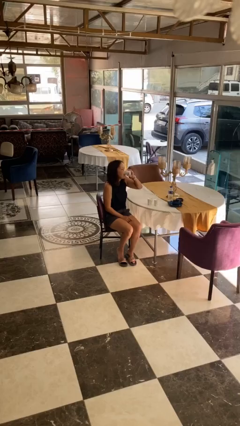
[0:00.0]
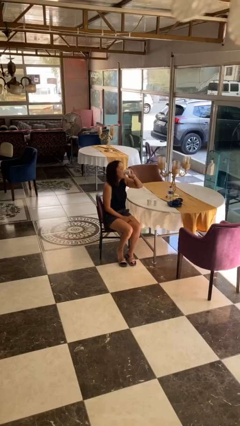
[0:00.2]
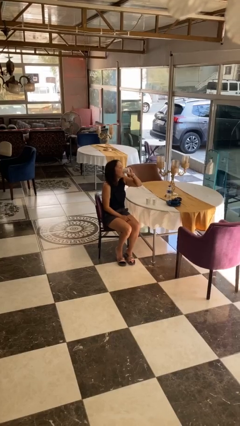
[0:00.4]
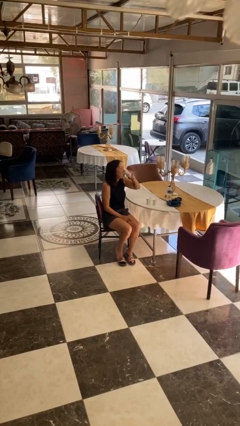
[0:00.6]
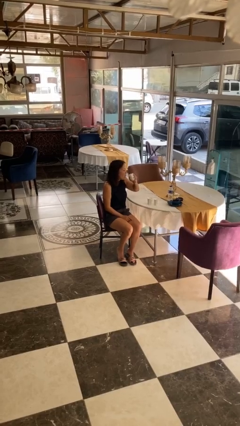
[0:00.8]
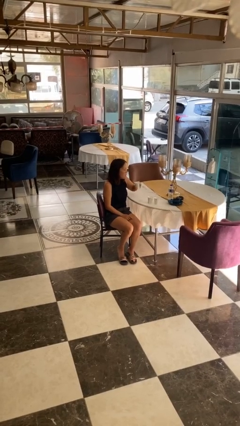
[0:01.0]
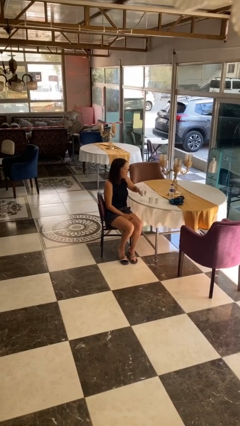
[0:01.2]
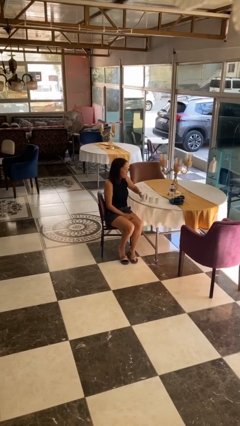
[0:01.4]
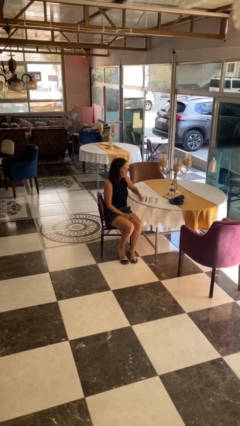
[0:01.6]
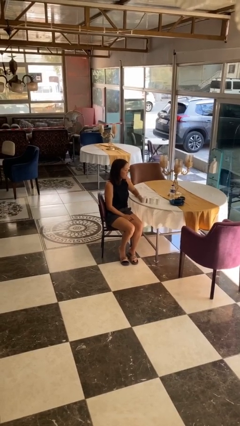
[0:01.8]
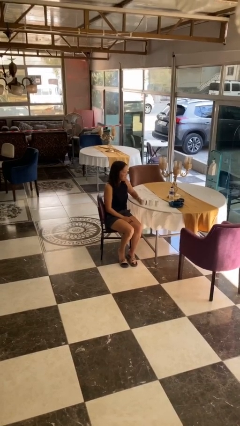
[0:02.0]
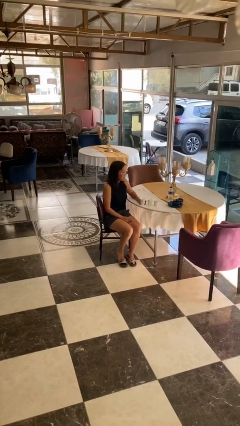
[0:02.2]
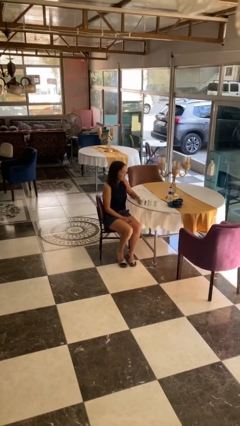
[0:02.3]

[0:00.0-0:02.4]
person puts down object on table

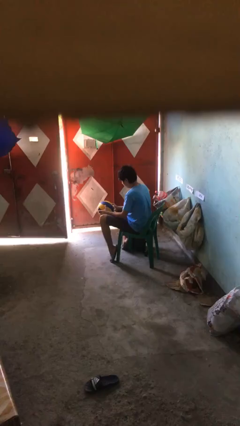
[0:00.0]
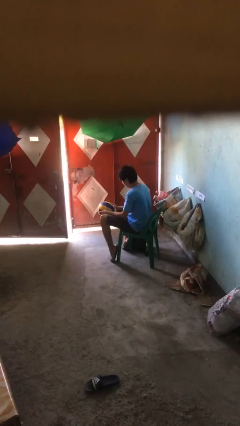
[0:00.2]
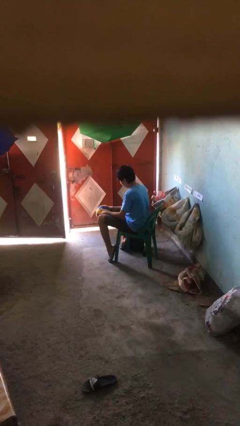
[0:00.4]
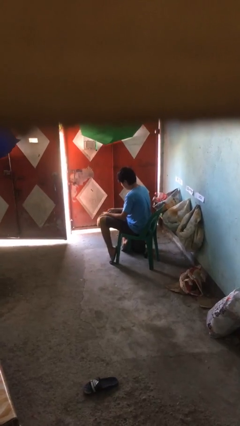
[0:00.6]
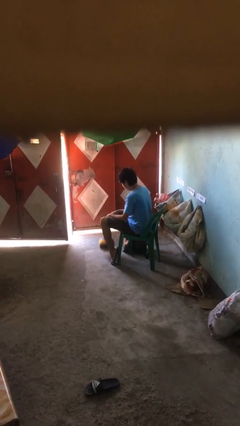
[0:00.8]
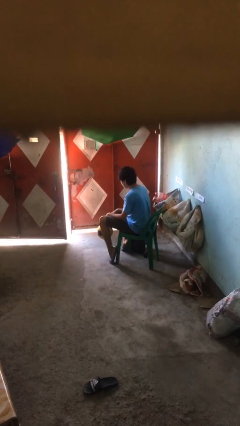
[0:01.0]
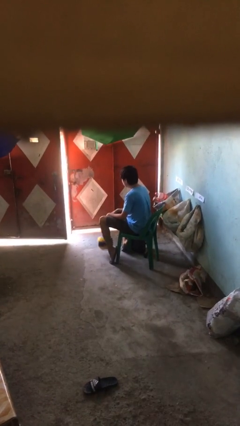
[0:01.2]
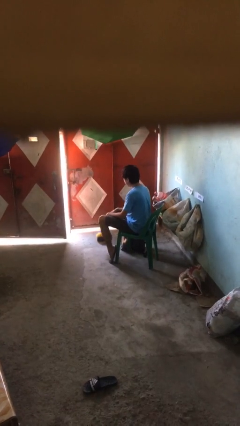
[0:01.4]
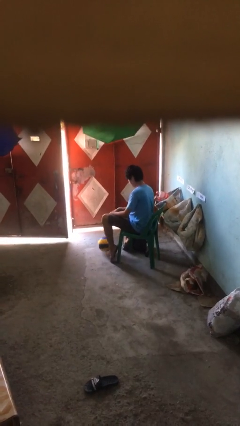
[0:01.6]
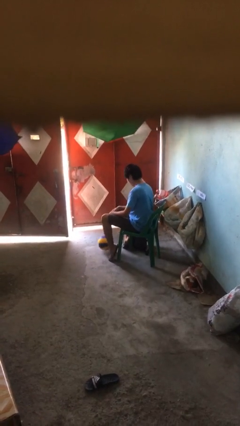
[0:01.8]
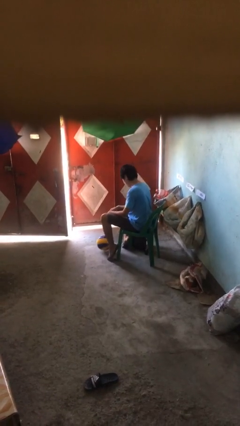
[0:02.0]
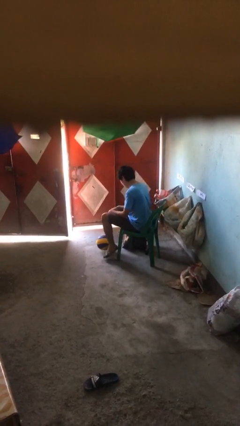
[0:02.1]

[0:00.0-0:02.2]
person drops object

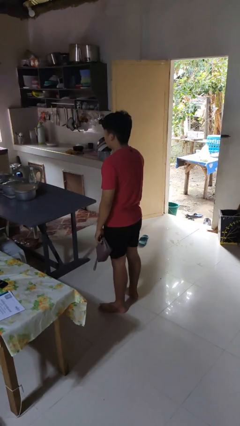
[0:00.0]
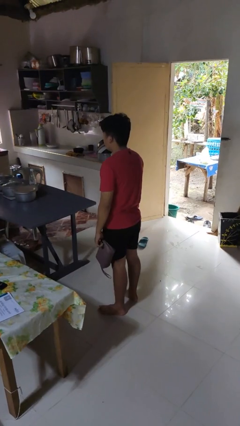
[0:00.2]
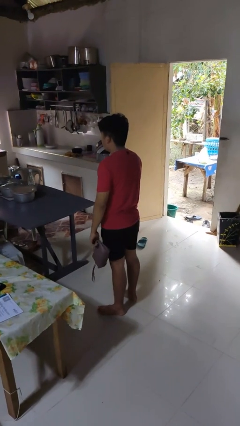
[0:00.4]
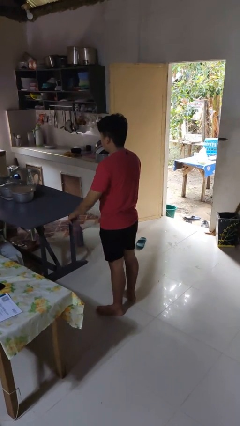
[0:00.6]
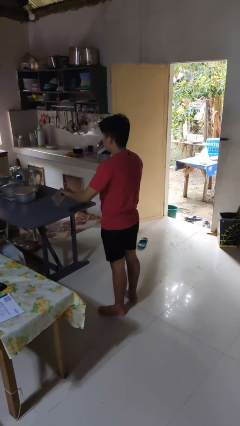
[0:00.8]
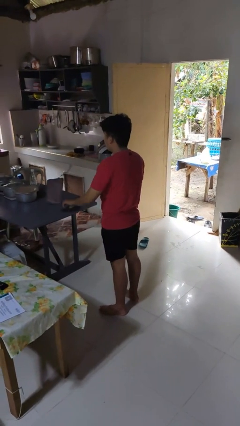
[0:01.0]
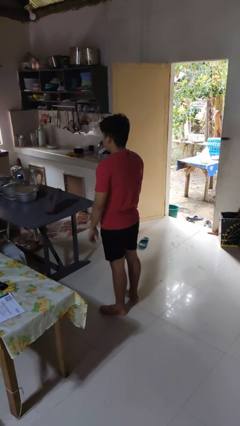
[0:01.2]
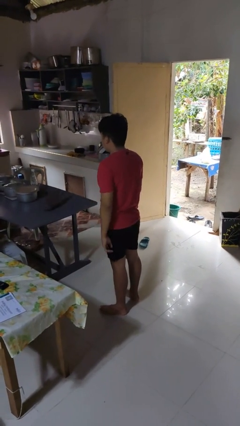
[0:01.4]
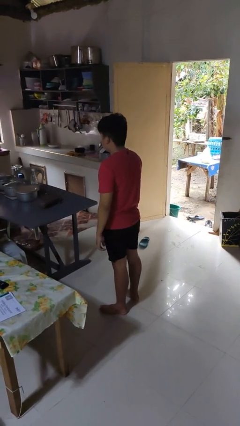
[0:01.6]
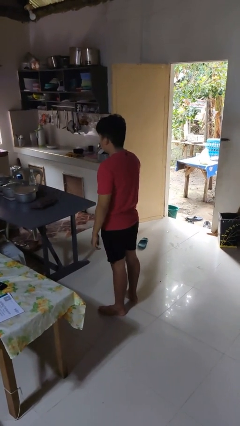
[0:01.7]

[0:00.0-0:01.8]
person throws object on table

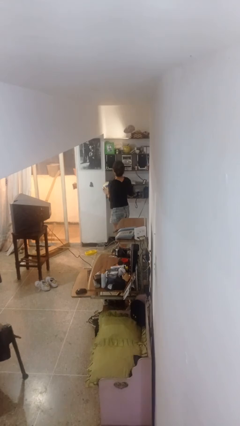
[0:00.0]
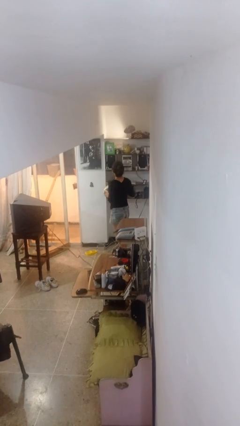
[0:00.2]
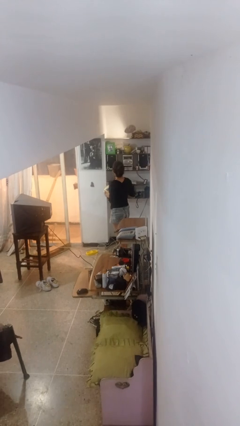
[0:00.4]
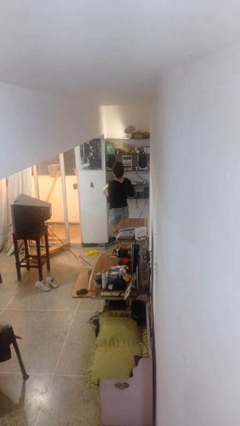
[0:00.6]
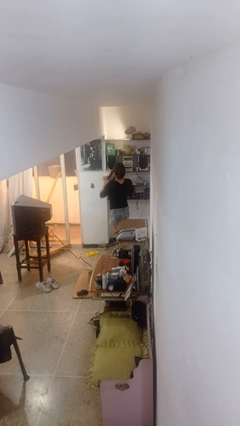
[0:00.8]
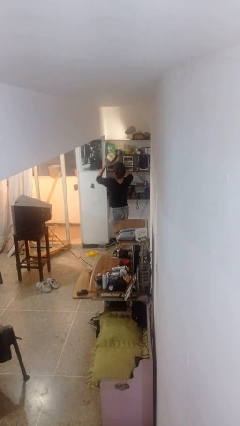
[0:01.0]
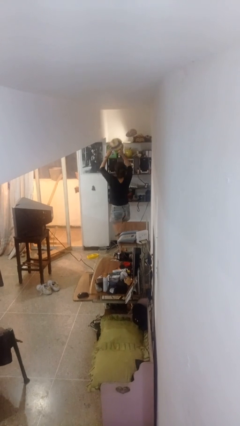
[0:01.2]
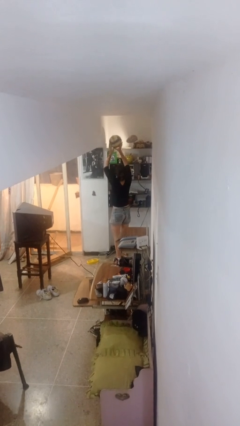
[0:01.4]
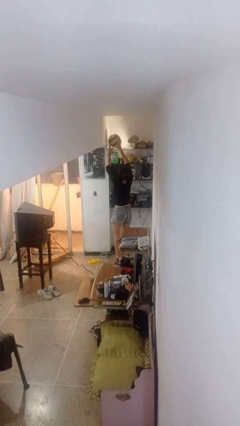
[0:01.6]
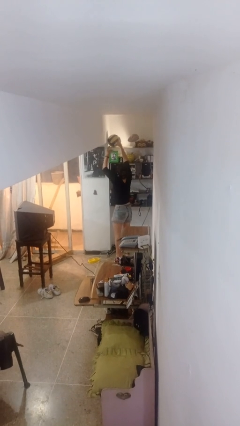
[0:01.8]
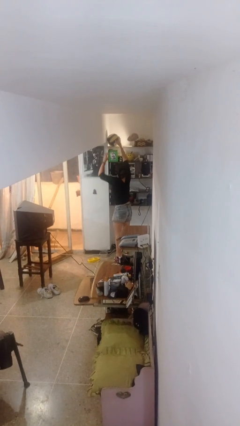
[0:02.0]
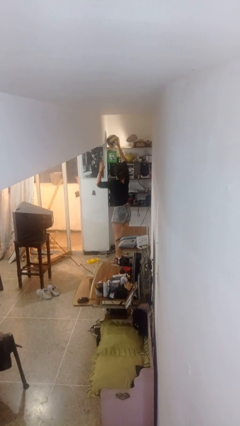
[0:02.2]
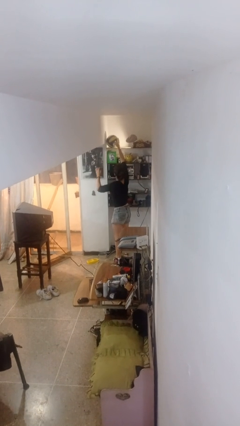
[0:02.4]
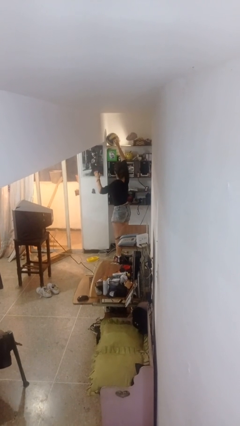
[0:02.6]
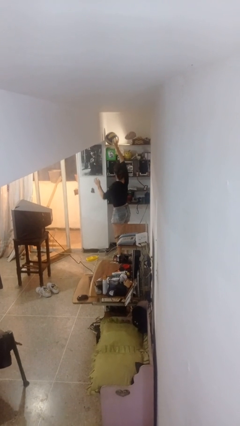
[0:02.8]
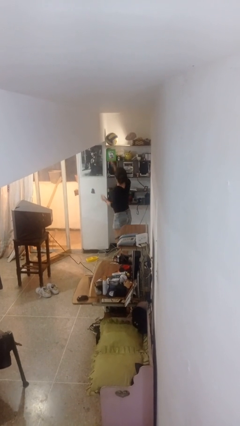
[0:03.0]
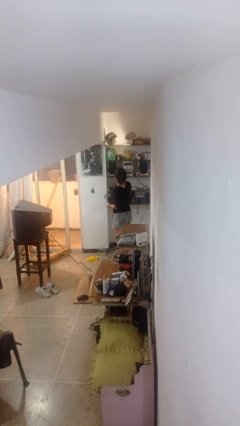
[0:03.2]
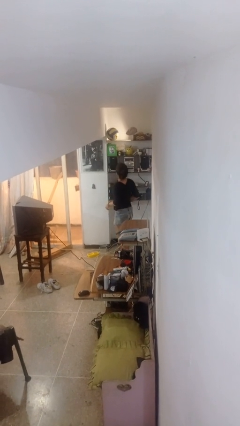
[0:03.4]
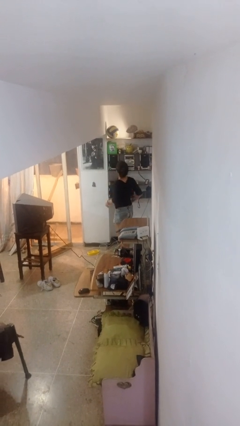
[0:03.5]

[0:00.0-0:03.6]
person puts down object on shelf

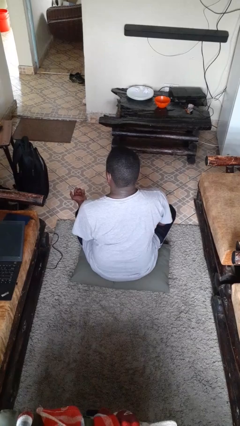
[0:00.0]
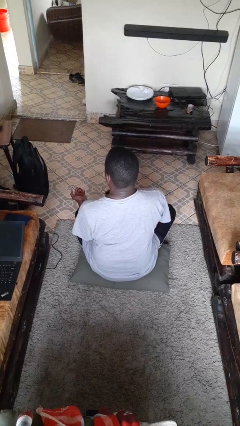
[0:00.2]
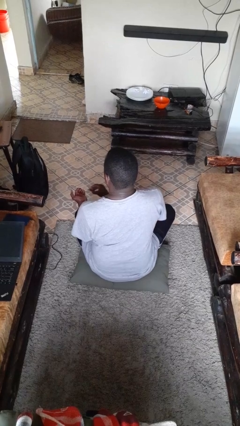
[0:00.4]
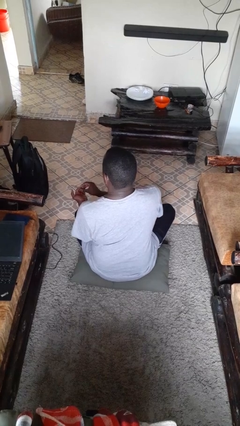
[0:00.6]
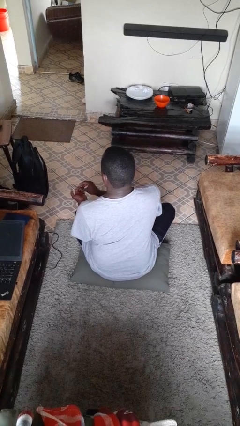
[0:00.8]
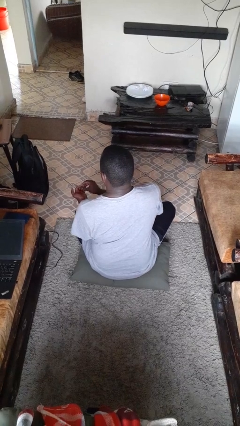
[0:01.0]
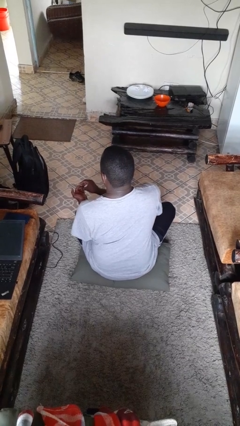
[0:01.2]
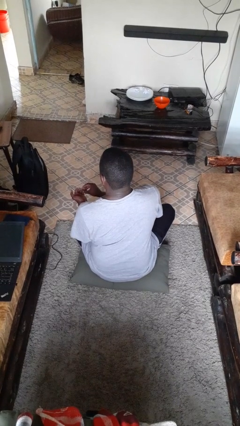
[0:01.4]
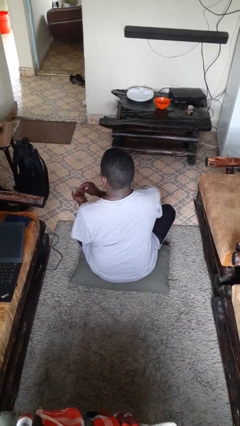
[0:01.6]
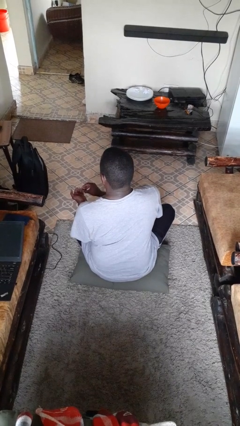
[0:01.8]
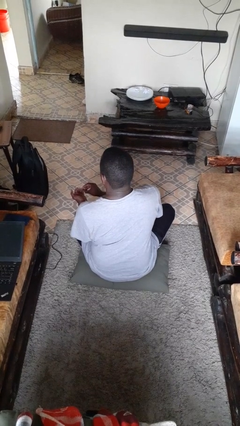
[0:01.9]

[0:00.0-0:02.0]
person files fingernails

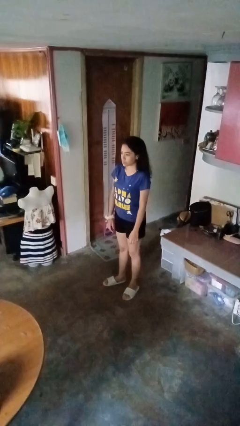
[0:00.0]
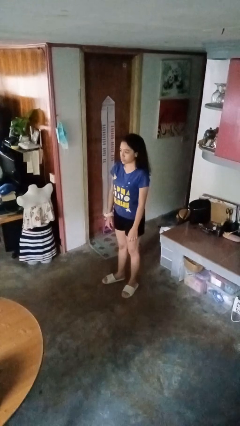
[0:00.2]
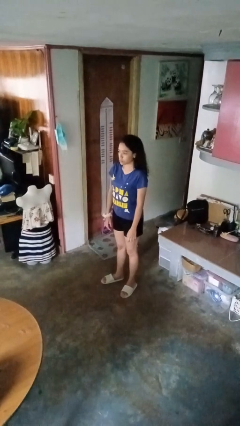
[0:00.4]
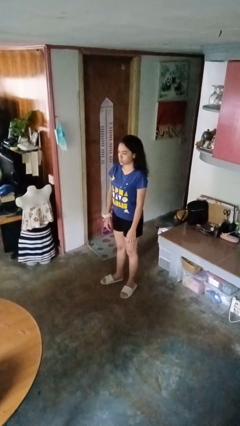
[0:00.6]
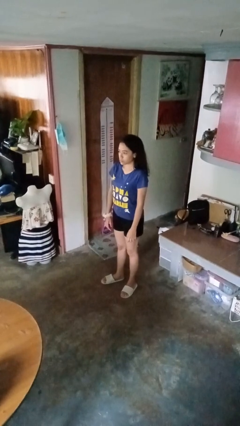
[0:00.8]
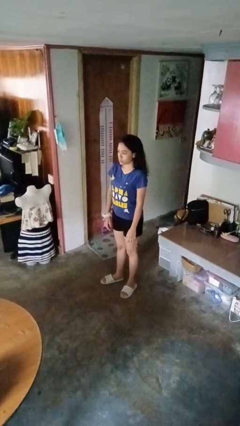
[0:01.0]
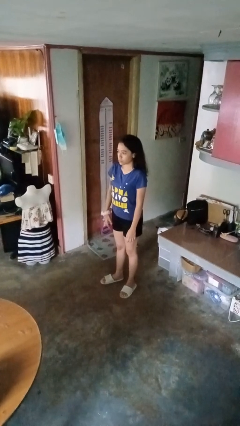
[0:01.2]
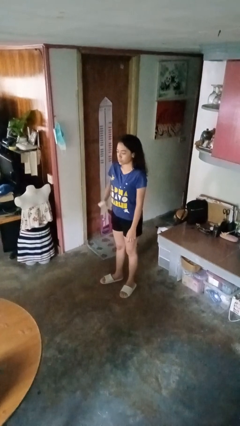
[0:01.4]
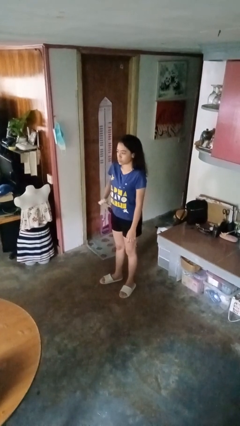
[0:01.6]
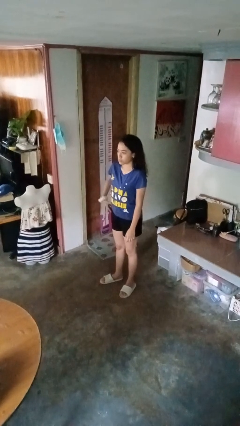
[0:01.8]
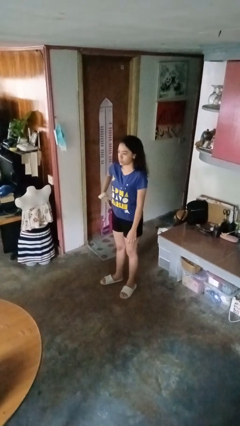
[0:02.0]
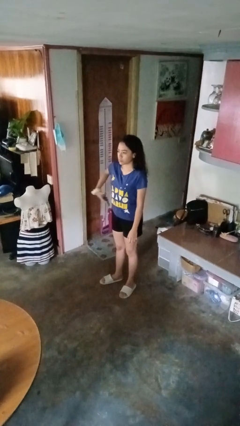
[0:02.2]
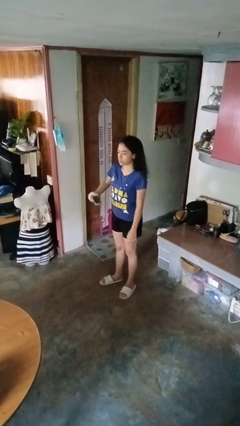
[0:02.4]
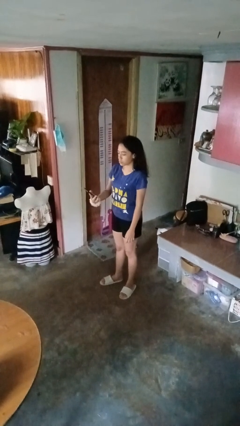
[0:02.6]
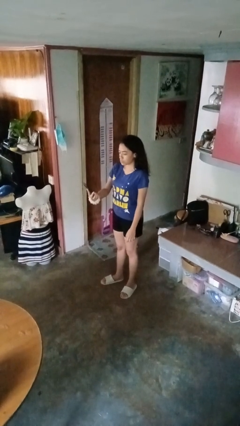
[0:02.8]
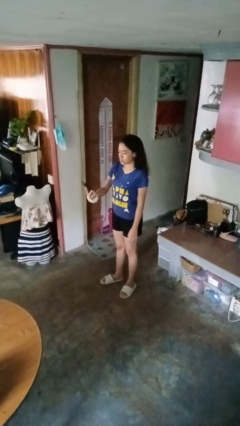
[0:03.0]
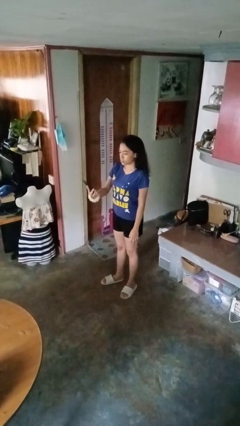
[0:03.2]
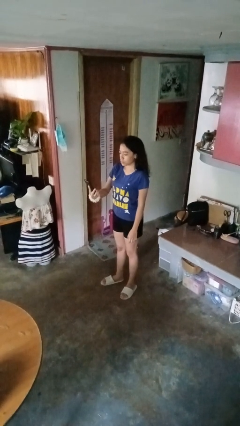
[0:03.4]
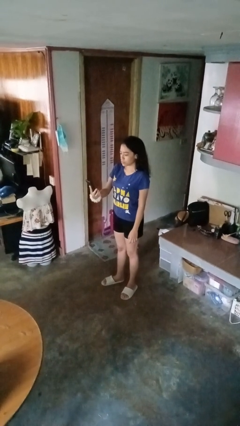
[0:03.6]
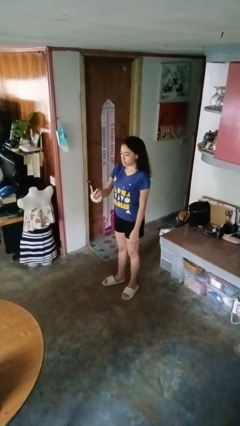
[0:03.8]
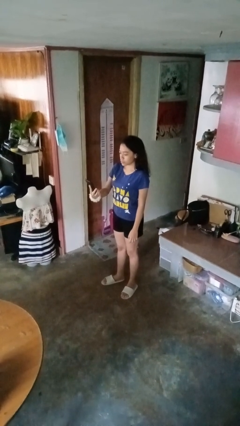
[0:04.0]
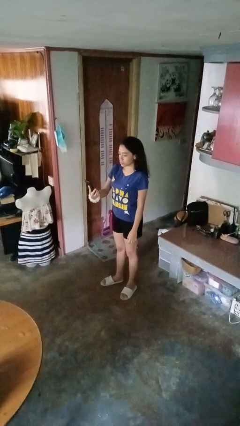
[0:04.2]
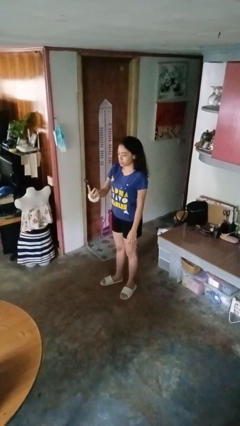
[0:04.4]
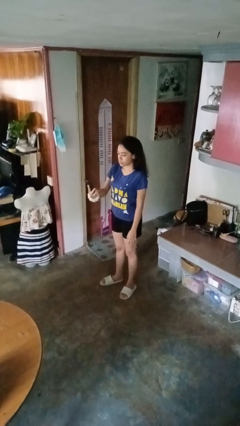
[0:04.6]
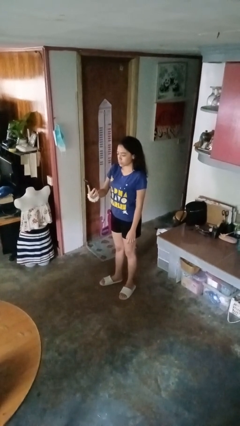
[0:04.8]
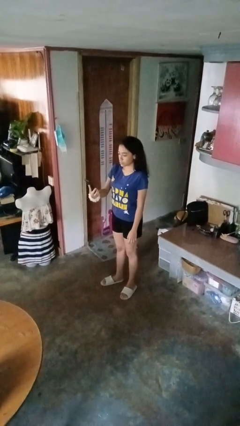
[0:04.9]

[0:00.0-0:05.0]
person takes phone from pocket

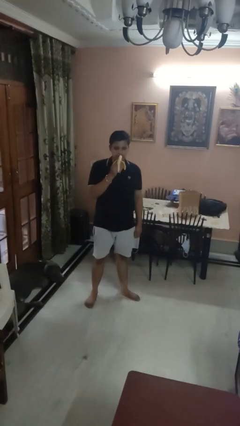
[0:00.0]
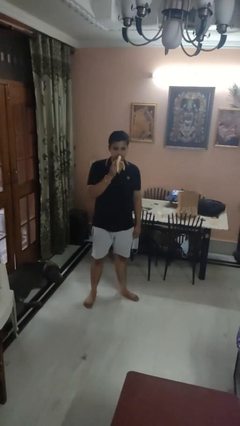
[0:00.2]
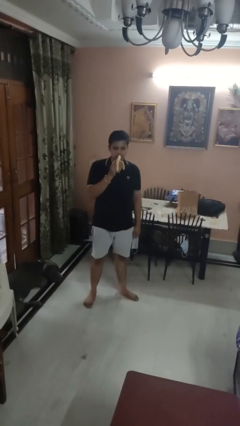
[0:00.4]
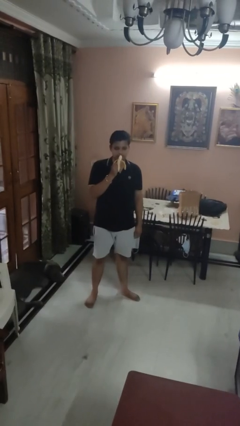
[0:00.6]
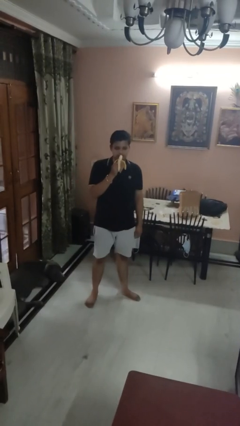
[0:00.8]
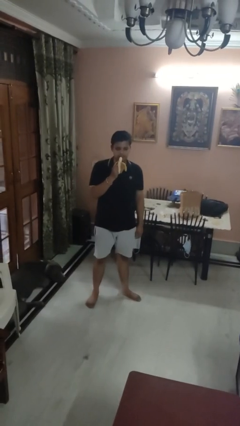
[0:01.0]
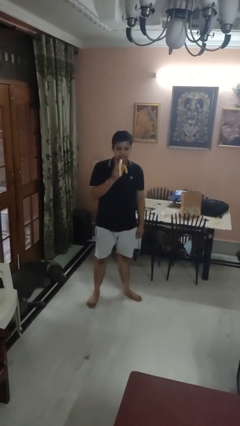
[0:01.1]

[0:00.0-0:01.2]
person eats banana
